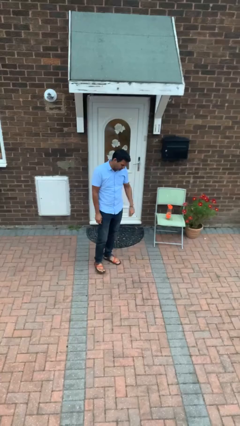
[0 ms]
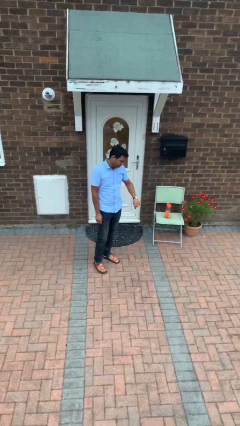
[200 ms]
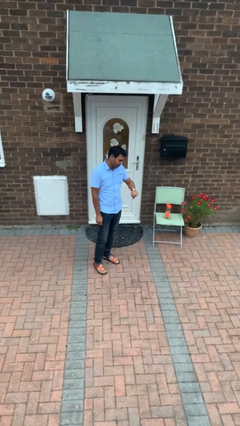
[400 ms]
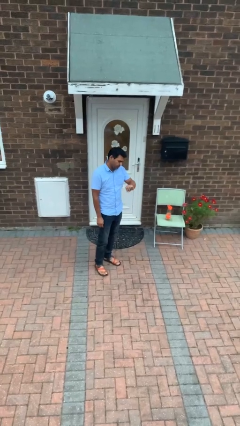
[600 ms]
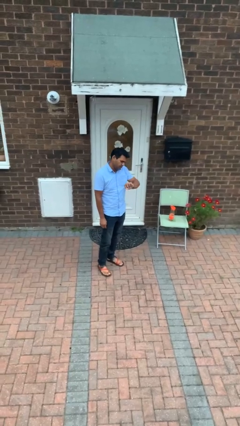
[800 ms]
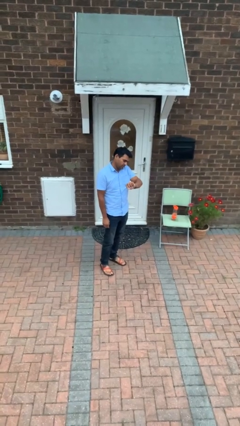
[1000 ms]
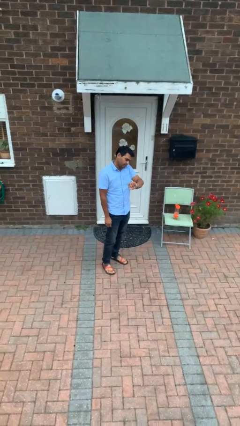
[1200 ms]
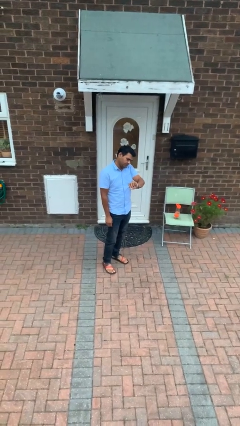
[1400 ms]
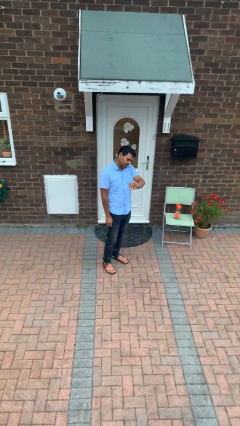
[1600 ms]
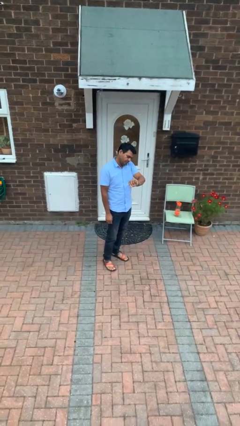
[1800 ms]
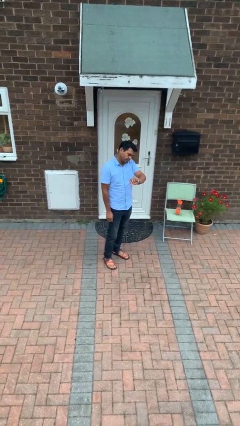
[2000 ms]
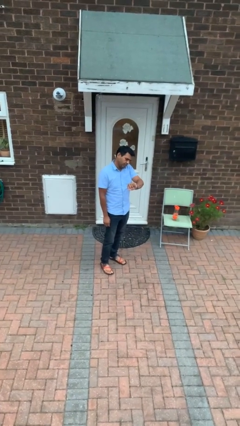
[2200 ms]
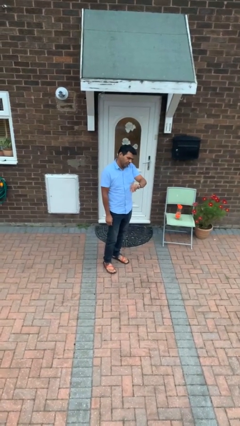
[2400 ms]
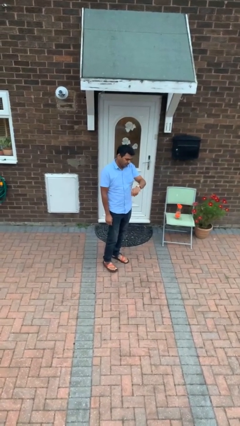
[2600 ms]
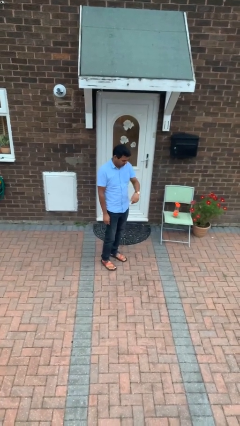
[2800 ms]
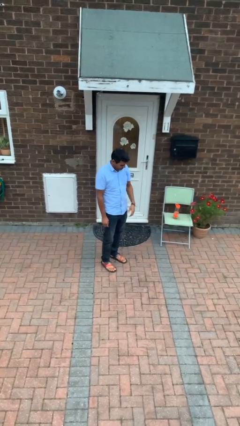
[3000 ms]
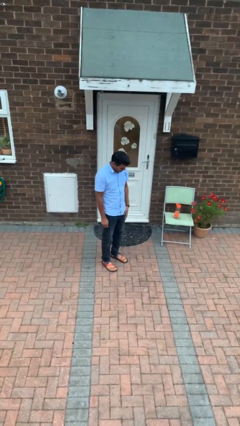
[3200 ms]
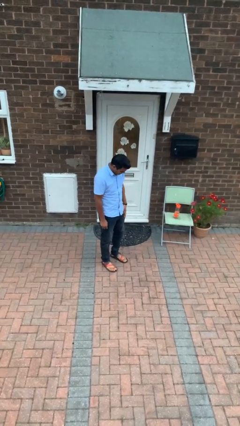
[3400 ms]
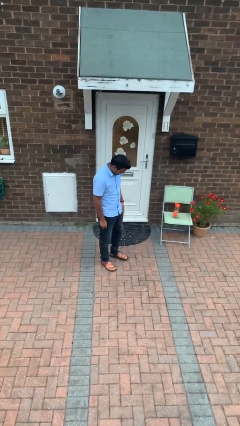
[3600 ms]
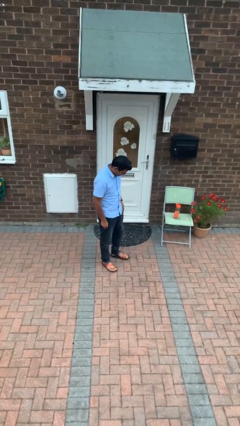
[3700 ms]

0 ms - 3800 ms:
person looks at wristwatch

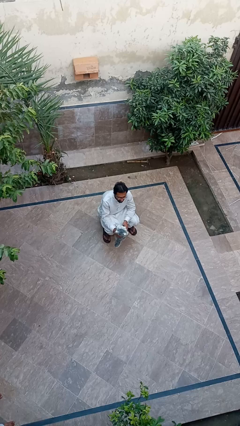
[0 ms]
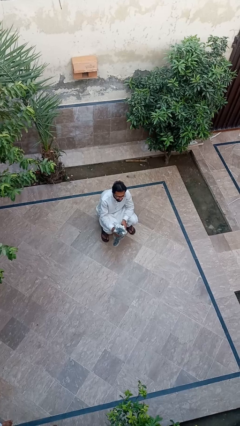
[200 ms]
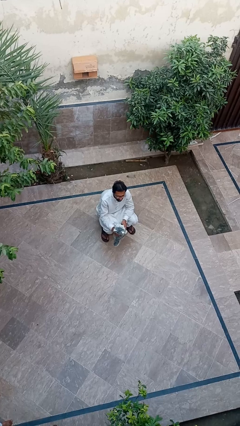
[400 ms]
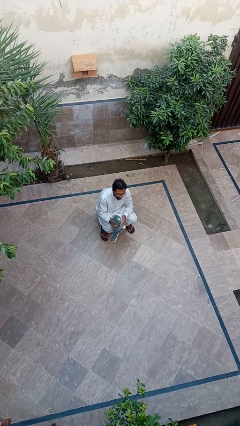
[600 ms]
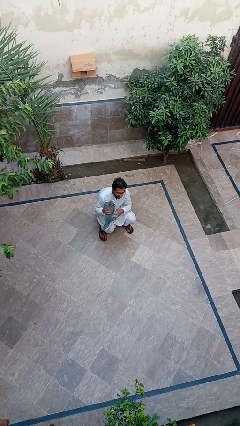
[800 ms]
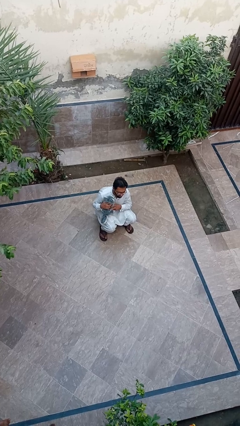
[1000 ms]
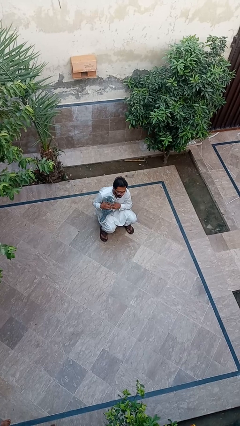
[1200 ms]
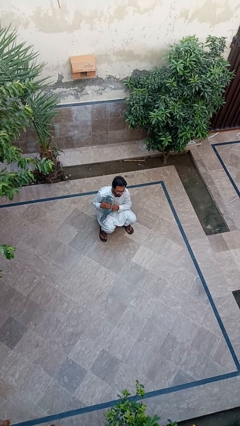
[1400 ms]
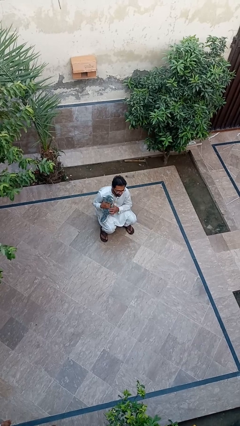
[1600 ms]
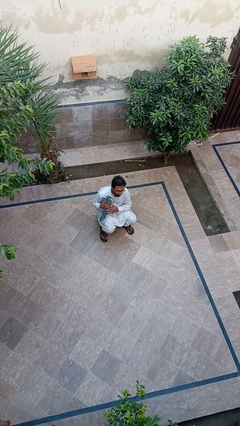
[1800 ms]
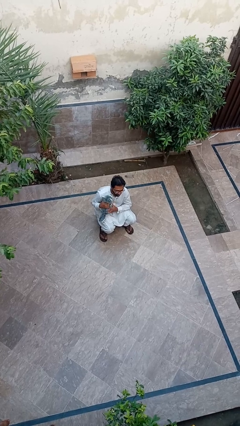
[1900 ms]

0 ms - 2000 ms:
person hugs dog

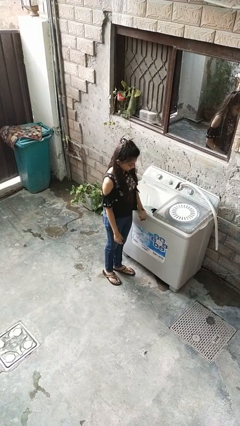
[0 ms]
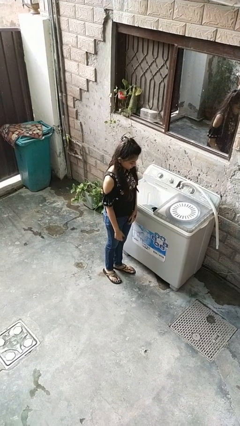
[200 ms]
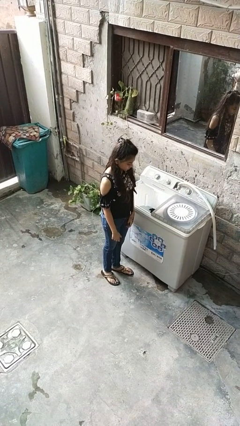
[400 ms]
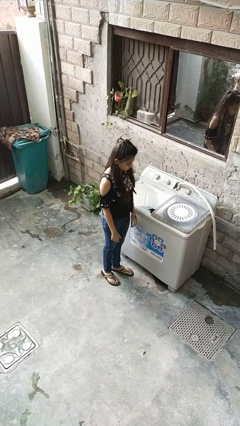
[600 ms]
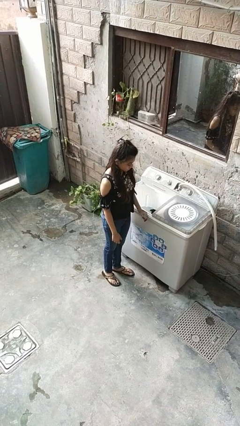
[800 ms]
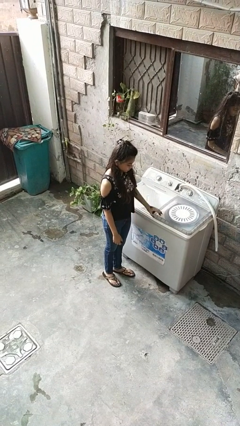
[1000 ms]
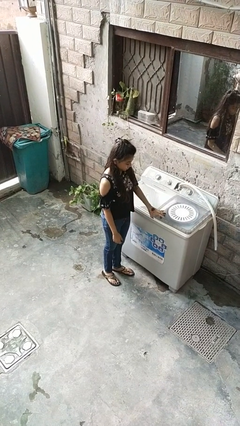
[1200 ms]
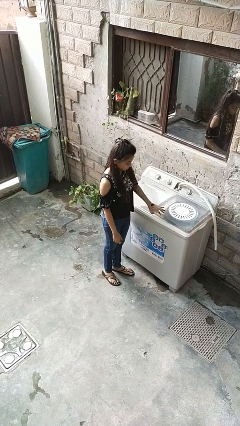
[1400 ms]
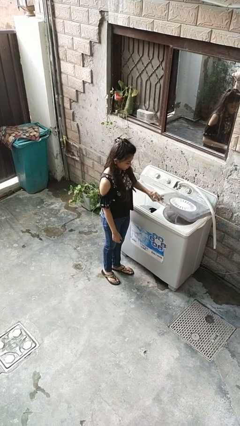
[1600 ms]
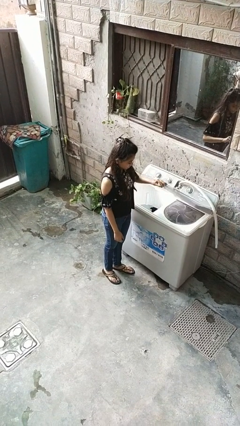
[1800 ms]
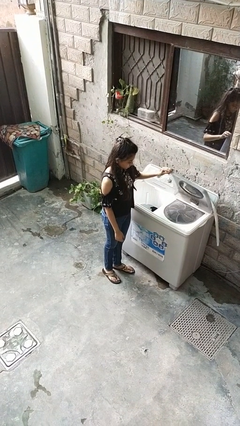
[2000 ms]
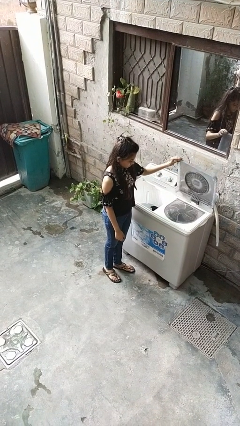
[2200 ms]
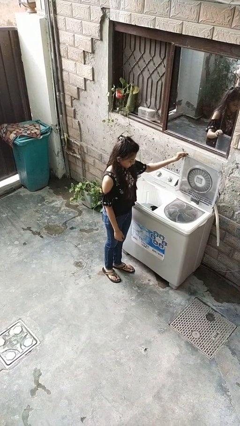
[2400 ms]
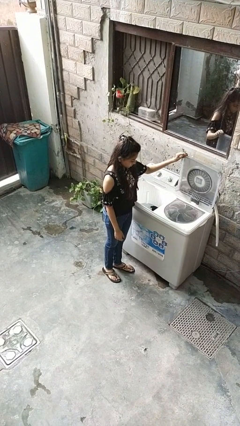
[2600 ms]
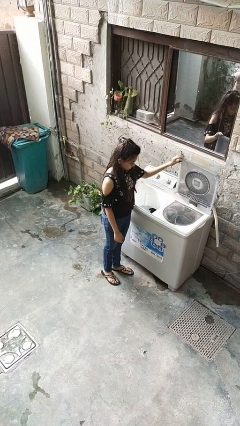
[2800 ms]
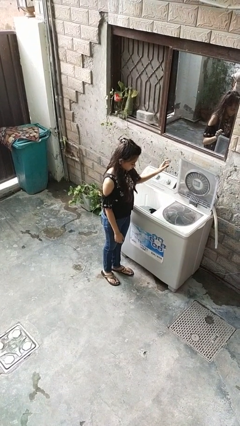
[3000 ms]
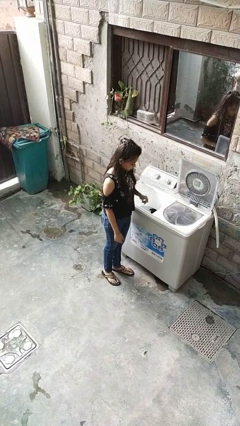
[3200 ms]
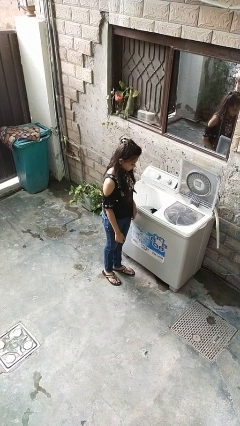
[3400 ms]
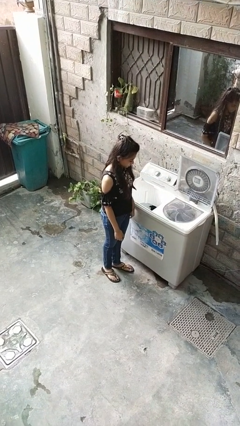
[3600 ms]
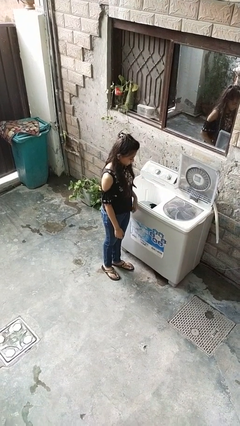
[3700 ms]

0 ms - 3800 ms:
person opens clothes washer

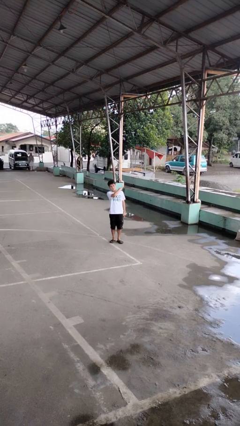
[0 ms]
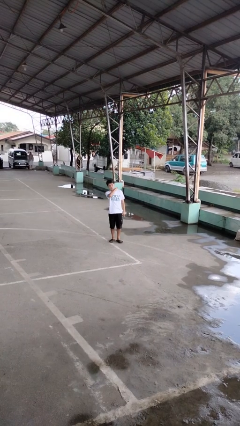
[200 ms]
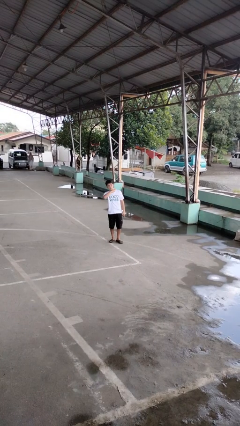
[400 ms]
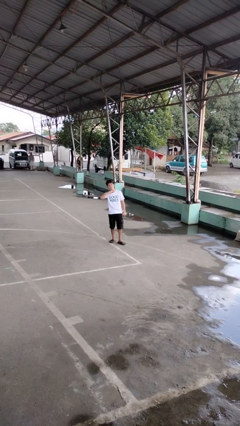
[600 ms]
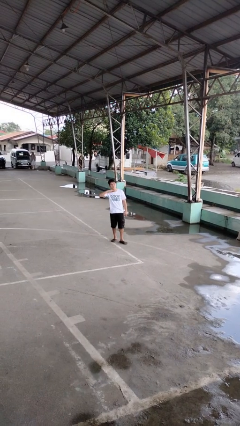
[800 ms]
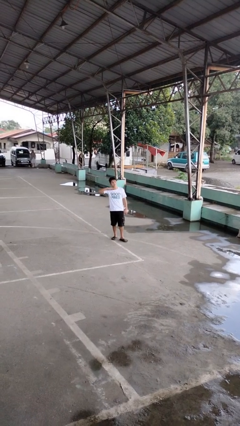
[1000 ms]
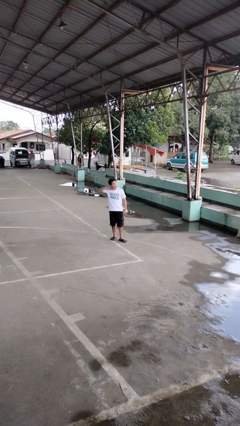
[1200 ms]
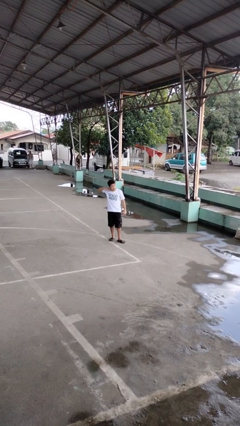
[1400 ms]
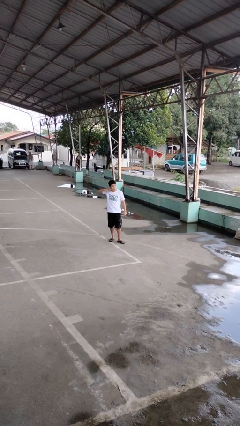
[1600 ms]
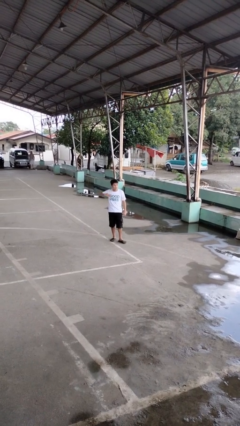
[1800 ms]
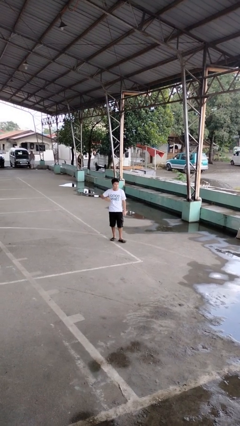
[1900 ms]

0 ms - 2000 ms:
person gestures cut

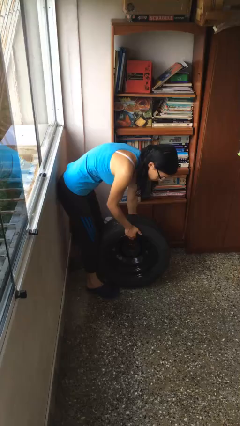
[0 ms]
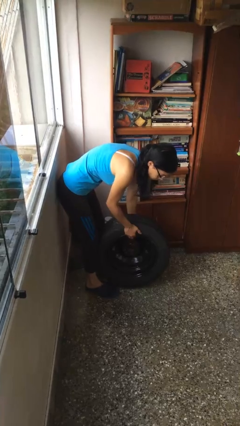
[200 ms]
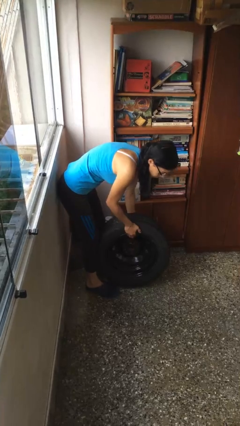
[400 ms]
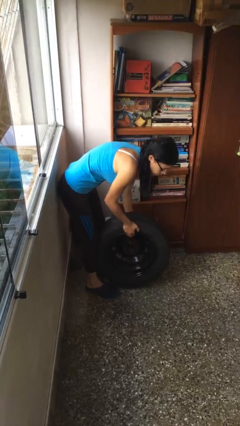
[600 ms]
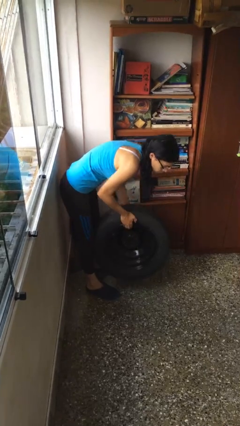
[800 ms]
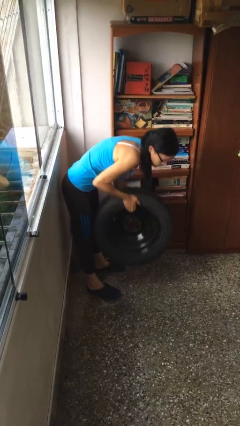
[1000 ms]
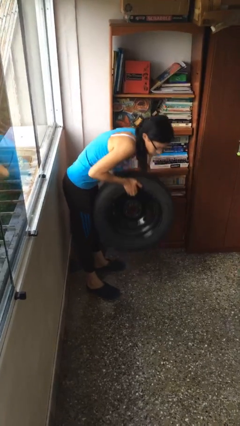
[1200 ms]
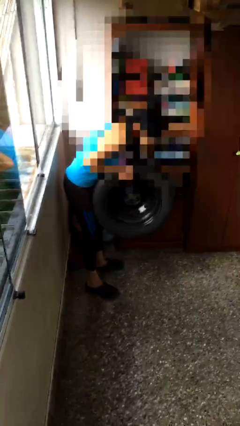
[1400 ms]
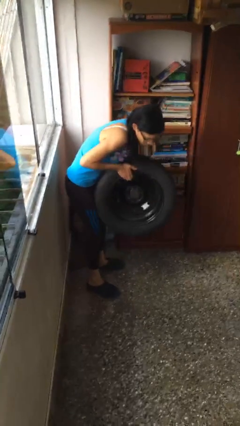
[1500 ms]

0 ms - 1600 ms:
person picks up object from floor

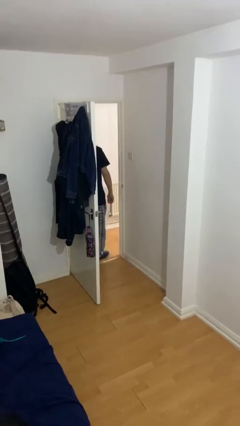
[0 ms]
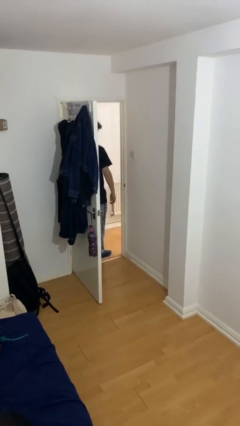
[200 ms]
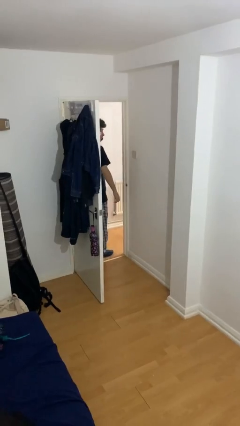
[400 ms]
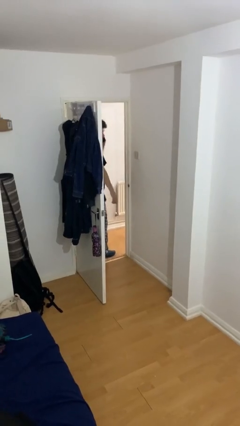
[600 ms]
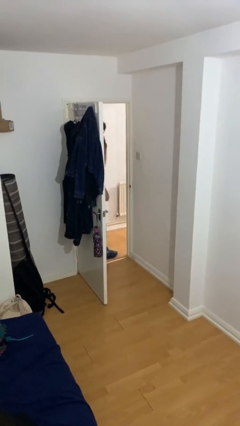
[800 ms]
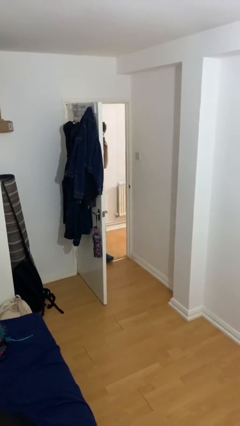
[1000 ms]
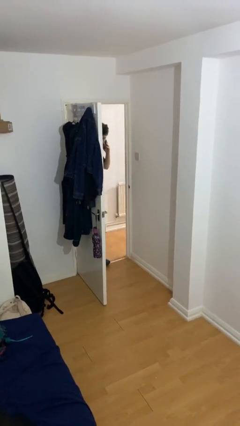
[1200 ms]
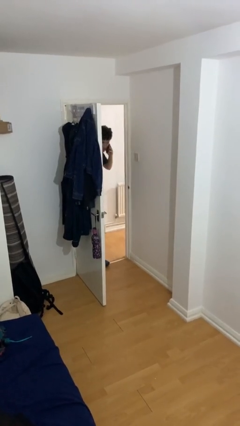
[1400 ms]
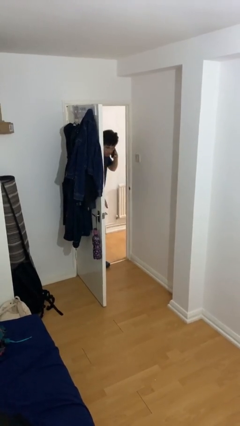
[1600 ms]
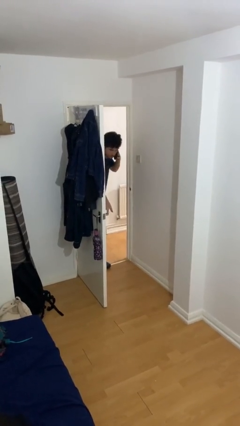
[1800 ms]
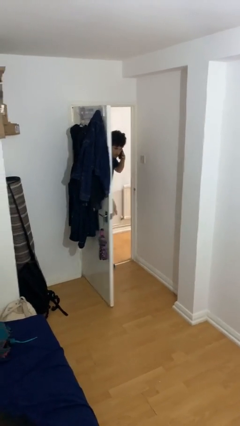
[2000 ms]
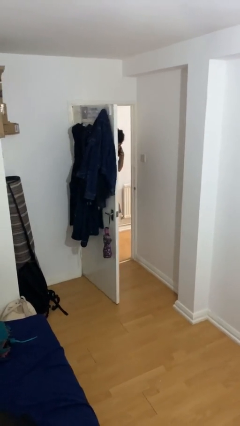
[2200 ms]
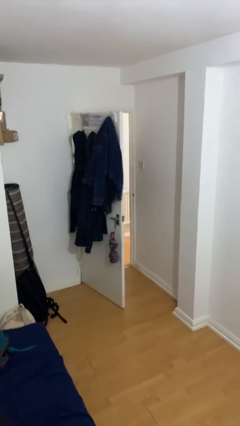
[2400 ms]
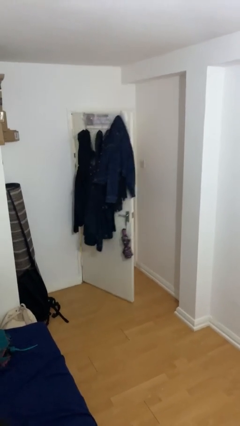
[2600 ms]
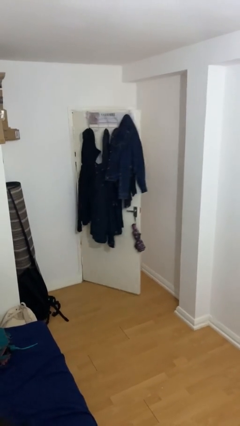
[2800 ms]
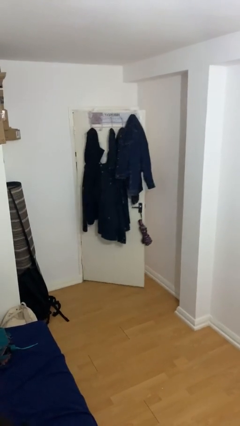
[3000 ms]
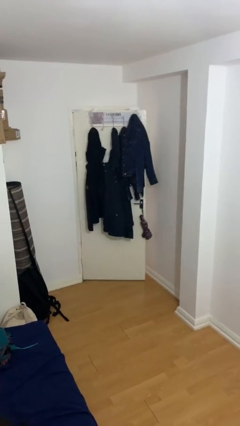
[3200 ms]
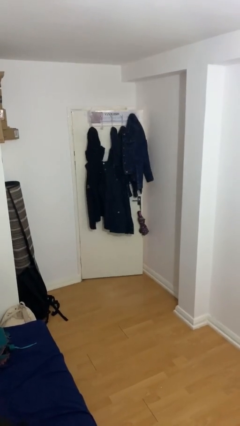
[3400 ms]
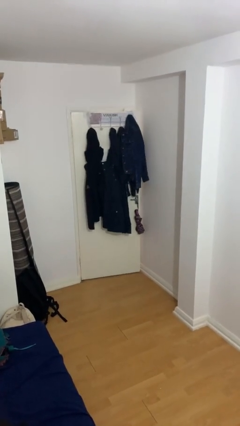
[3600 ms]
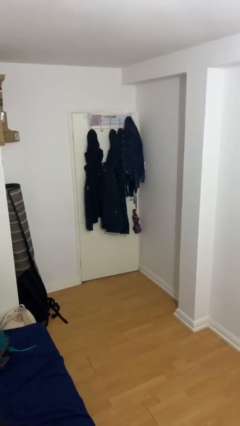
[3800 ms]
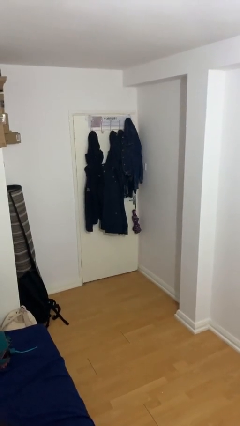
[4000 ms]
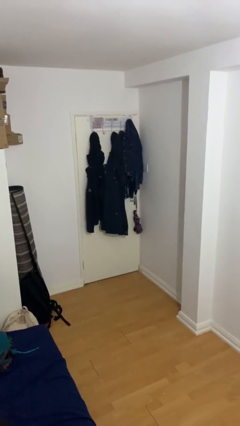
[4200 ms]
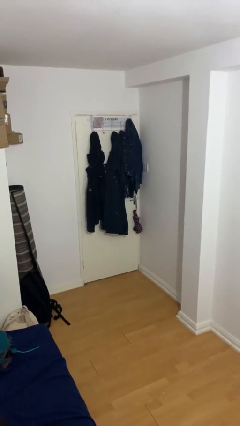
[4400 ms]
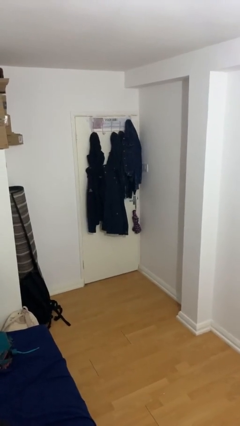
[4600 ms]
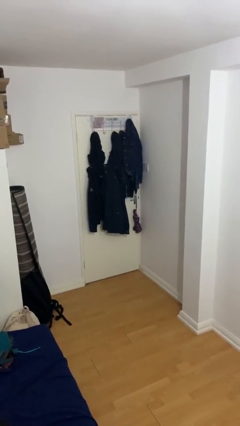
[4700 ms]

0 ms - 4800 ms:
person closes facility door
